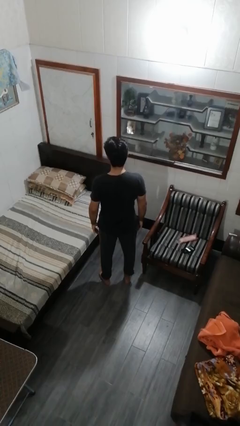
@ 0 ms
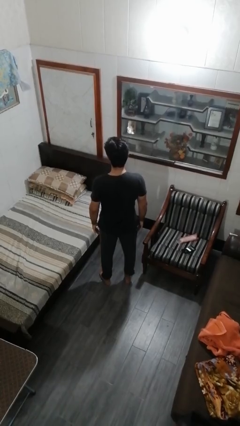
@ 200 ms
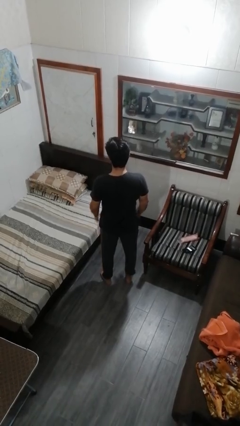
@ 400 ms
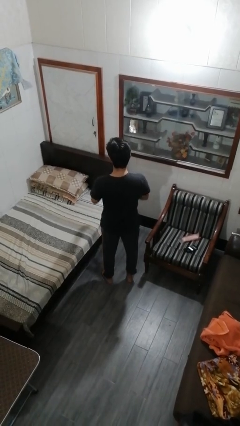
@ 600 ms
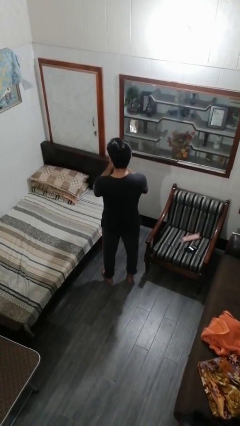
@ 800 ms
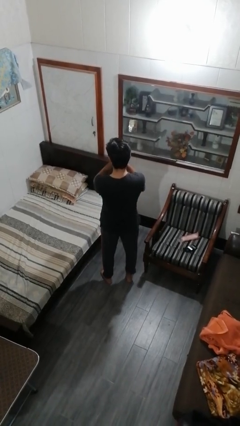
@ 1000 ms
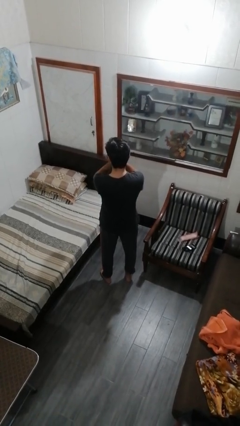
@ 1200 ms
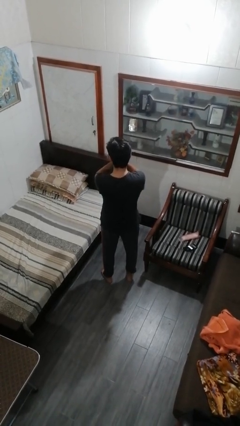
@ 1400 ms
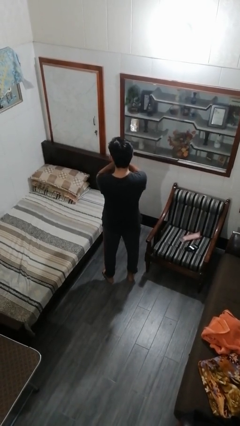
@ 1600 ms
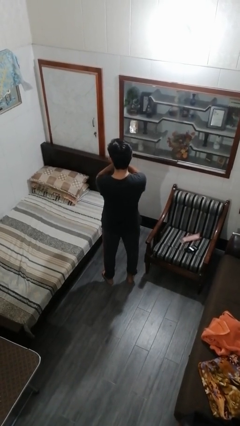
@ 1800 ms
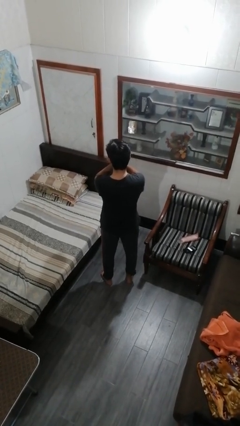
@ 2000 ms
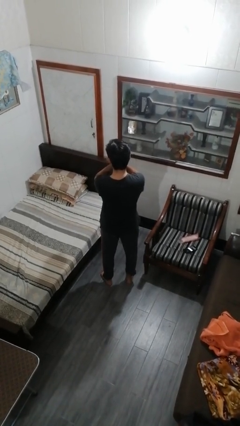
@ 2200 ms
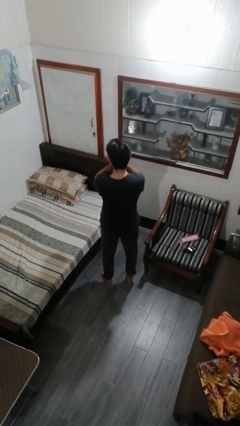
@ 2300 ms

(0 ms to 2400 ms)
person covers face with hands

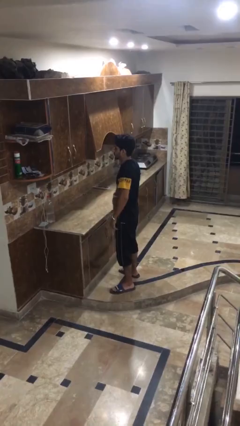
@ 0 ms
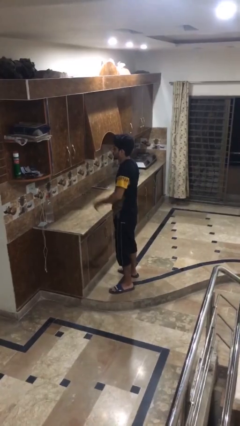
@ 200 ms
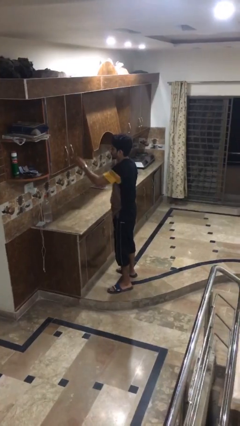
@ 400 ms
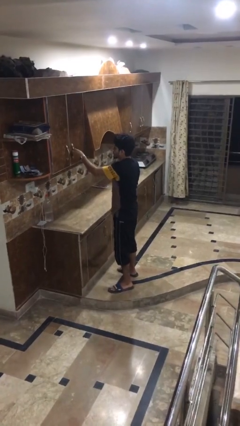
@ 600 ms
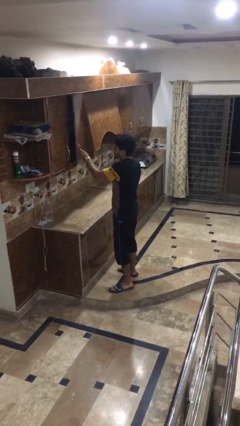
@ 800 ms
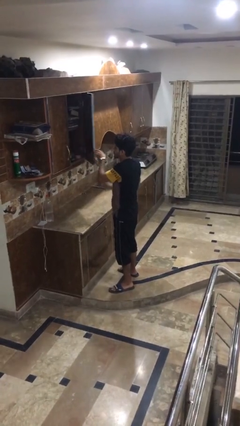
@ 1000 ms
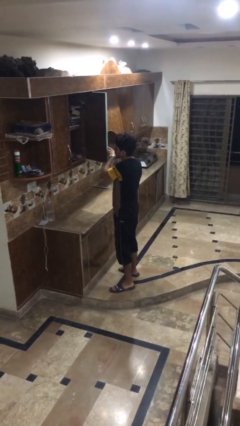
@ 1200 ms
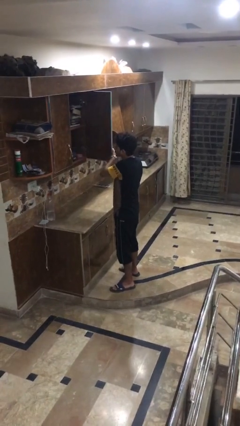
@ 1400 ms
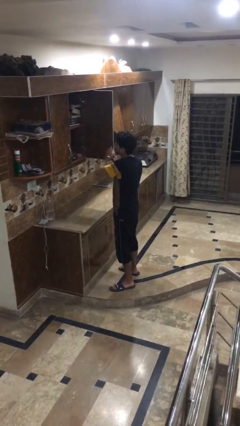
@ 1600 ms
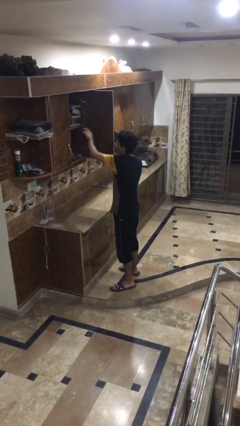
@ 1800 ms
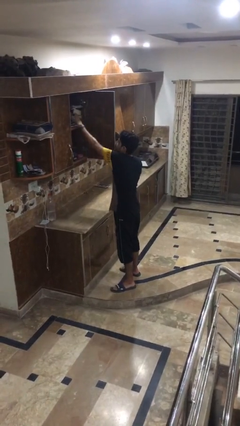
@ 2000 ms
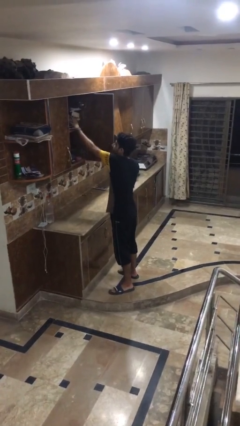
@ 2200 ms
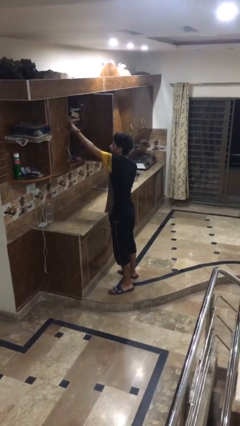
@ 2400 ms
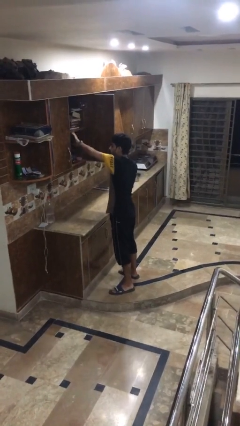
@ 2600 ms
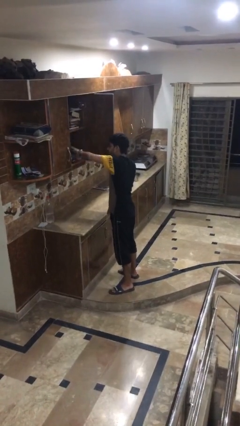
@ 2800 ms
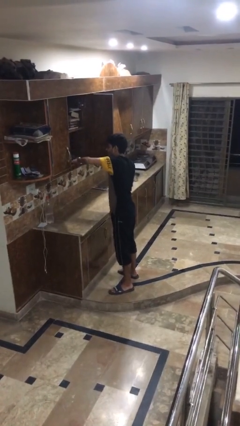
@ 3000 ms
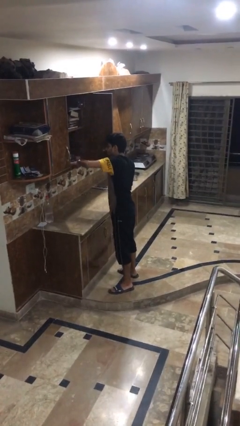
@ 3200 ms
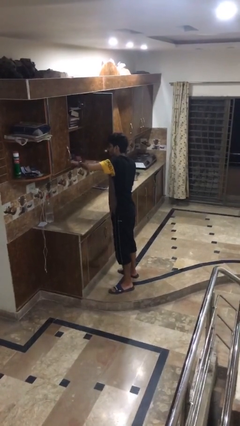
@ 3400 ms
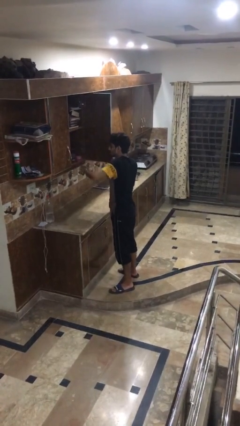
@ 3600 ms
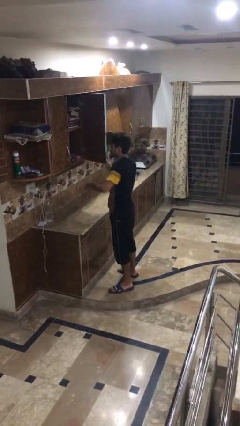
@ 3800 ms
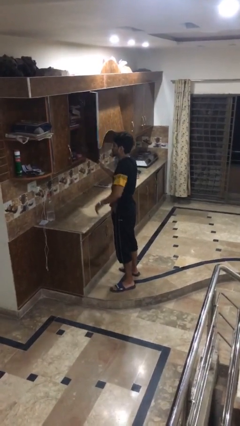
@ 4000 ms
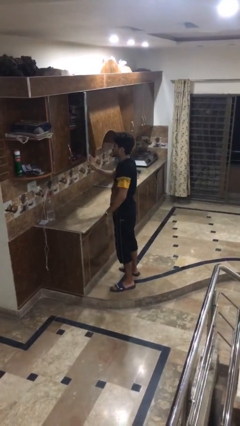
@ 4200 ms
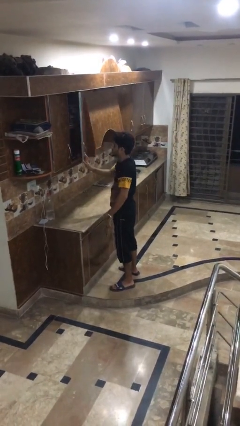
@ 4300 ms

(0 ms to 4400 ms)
person searches in cabinet

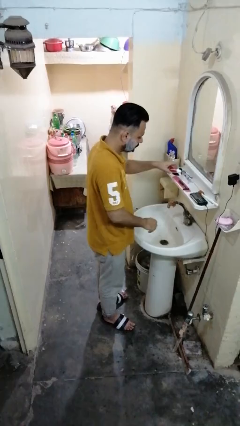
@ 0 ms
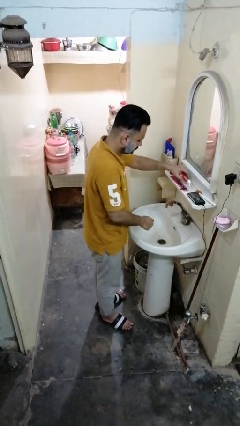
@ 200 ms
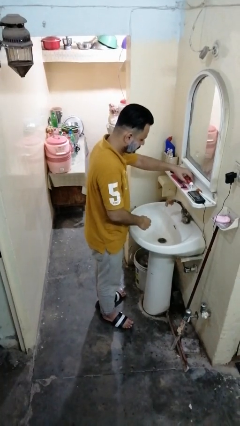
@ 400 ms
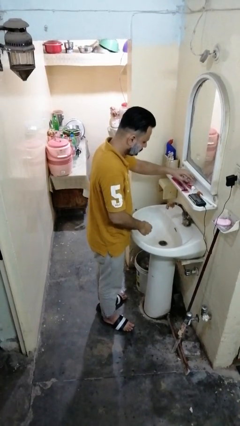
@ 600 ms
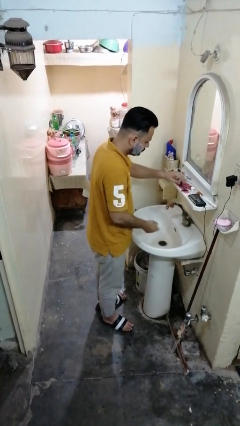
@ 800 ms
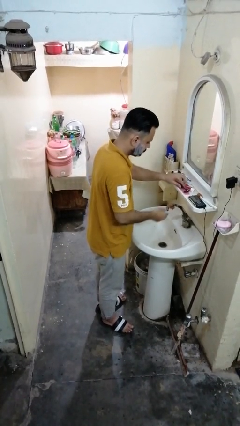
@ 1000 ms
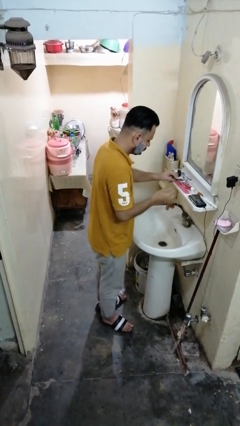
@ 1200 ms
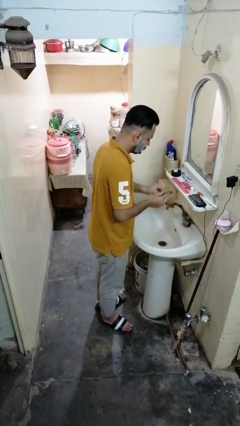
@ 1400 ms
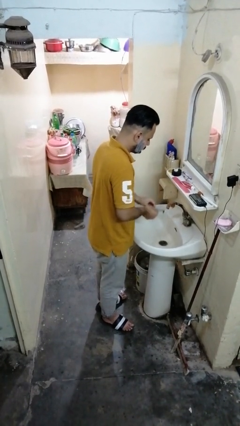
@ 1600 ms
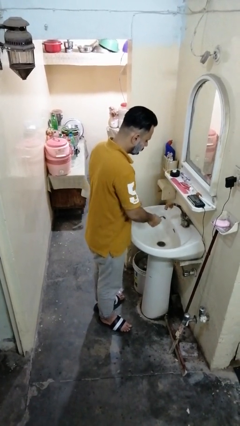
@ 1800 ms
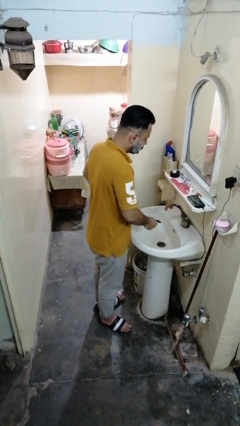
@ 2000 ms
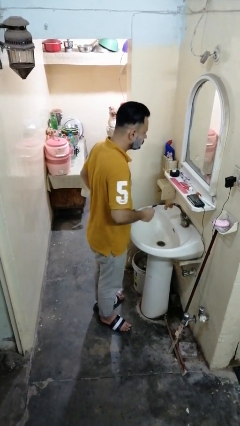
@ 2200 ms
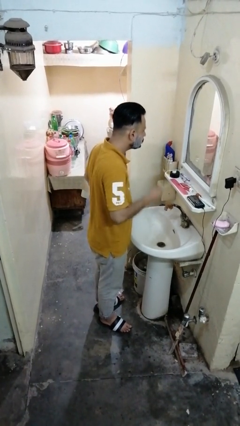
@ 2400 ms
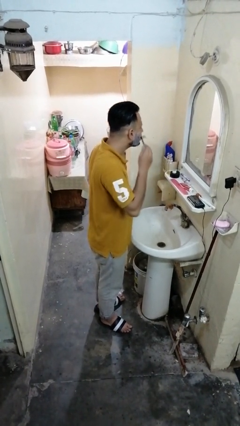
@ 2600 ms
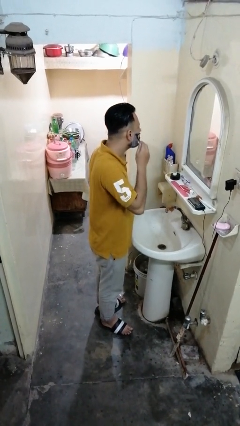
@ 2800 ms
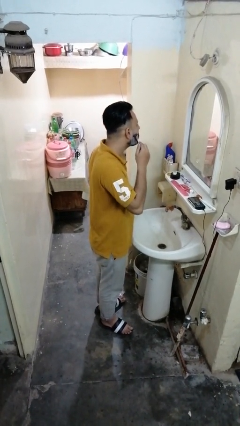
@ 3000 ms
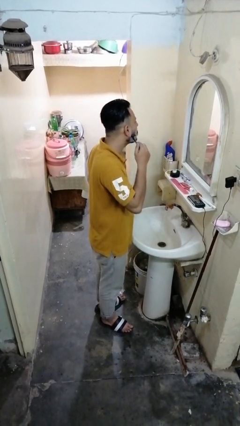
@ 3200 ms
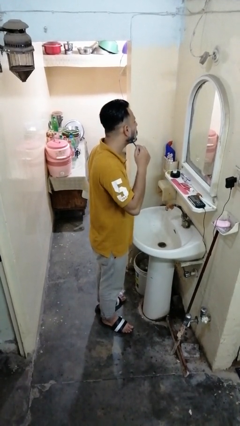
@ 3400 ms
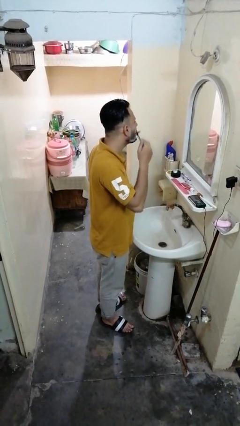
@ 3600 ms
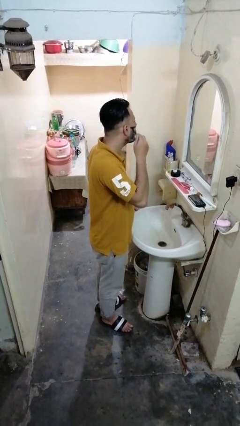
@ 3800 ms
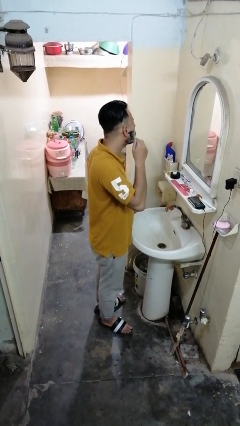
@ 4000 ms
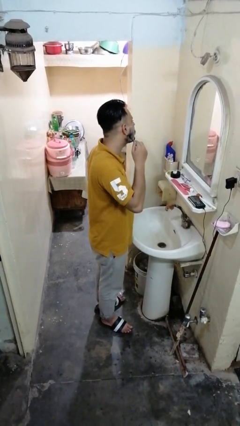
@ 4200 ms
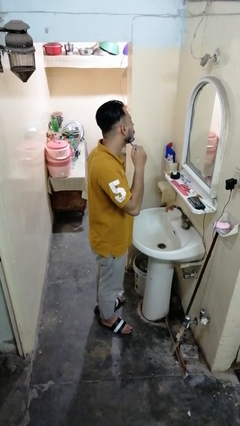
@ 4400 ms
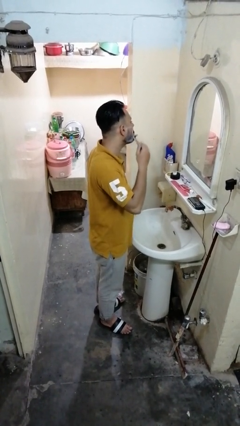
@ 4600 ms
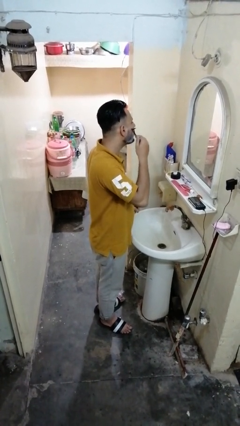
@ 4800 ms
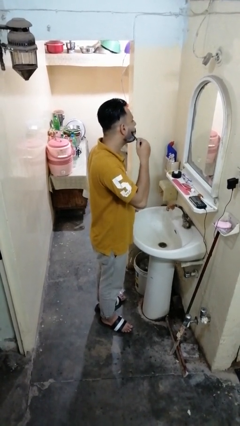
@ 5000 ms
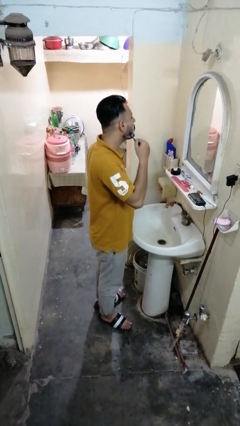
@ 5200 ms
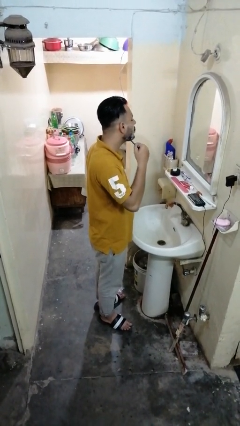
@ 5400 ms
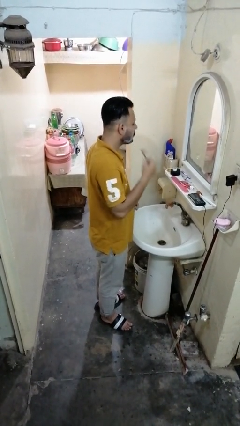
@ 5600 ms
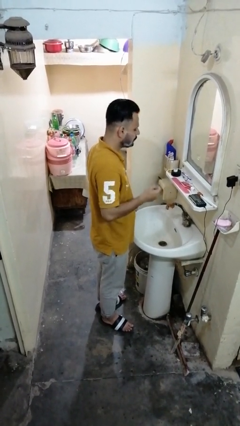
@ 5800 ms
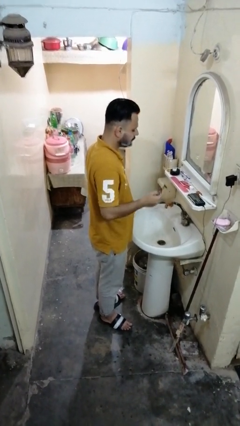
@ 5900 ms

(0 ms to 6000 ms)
person shaves face

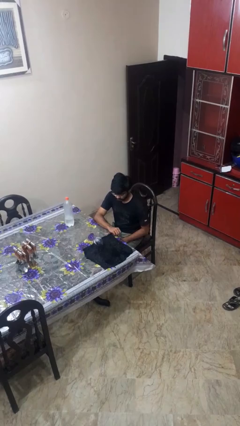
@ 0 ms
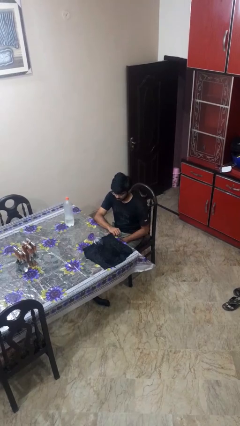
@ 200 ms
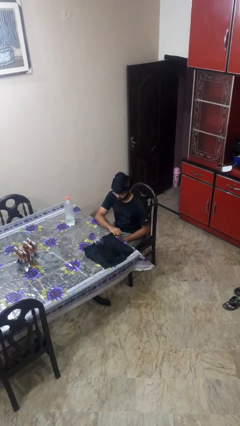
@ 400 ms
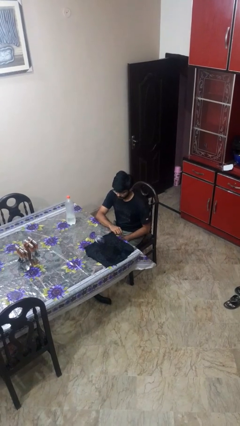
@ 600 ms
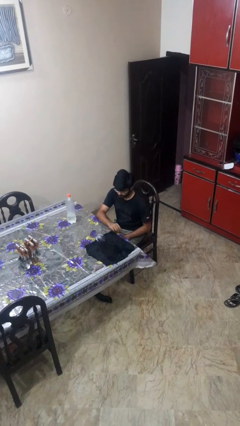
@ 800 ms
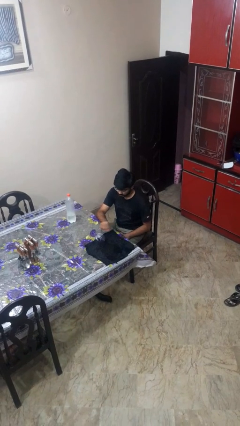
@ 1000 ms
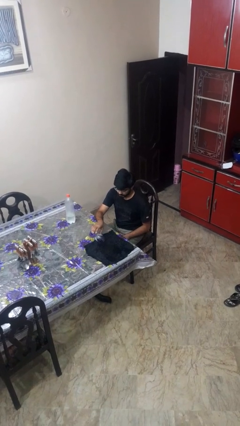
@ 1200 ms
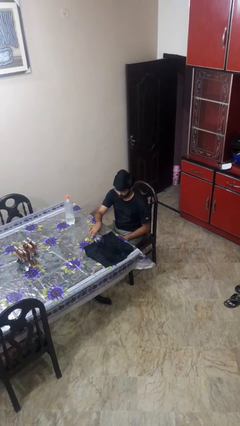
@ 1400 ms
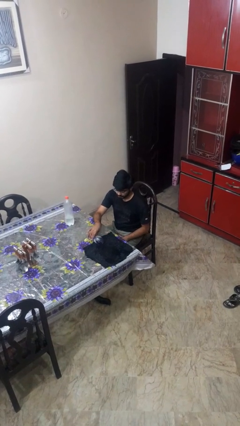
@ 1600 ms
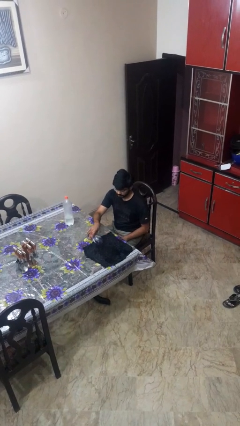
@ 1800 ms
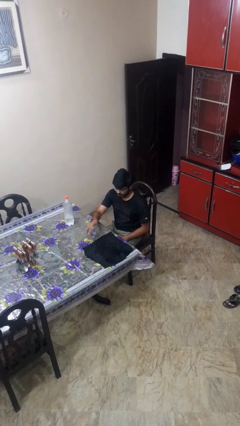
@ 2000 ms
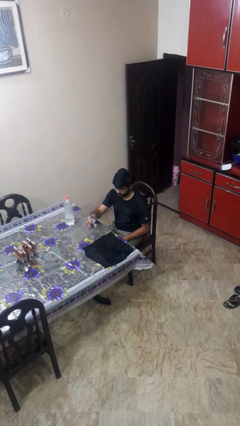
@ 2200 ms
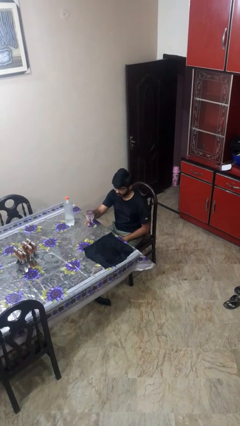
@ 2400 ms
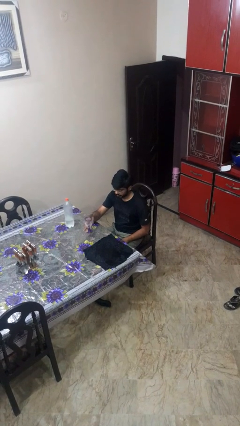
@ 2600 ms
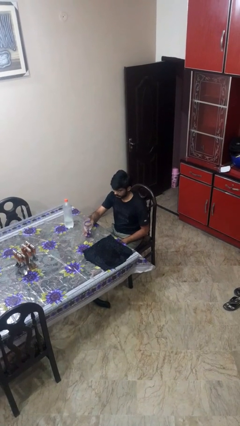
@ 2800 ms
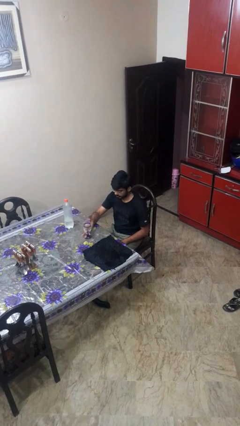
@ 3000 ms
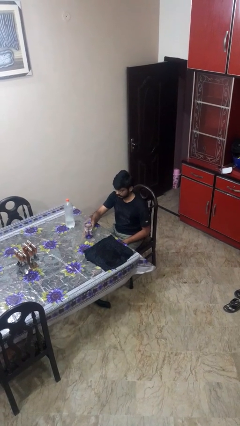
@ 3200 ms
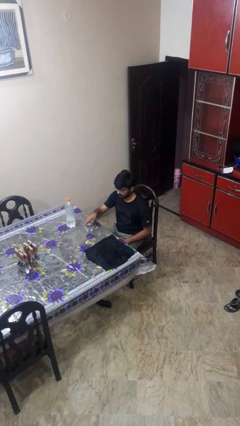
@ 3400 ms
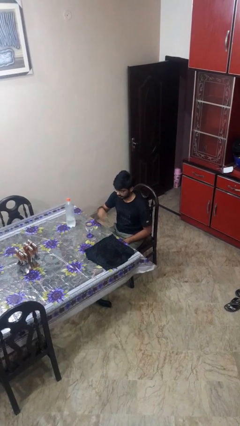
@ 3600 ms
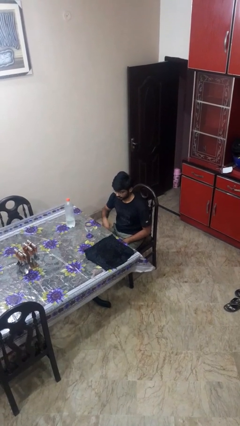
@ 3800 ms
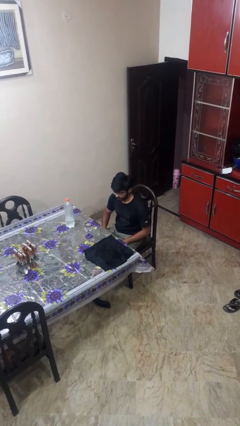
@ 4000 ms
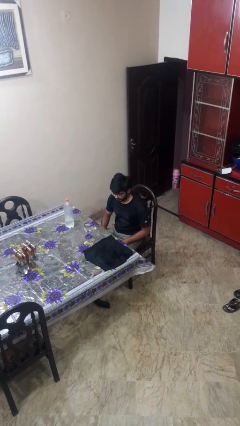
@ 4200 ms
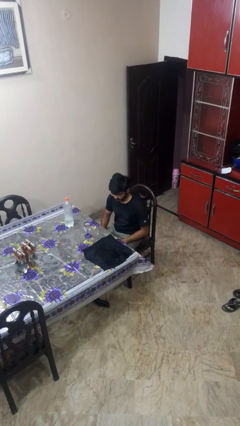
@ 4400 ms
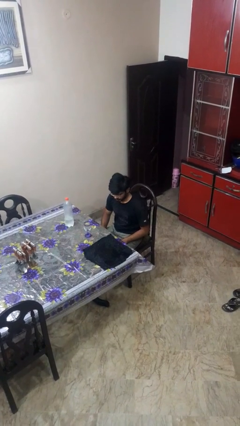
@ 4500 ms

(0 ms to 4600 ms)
person clips fingernails
